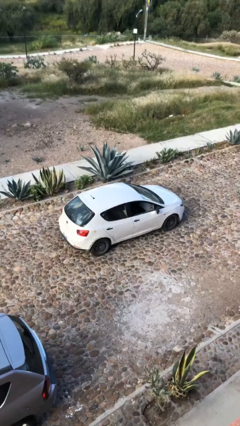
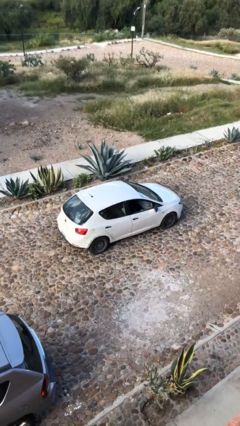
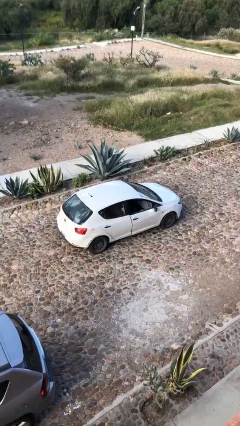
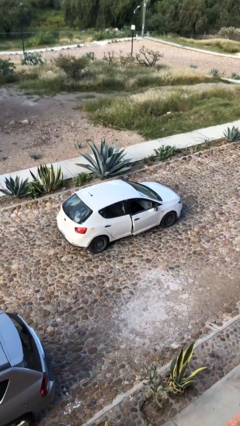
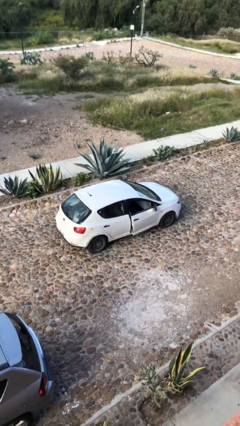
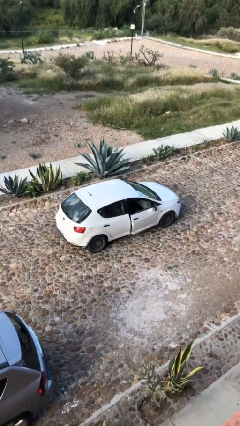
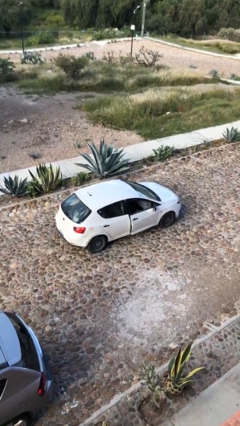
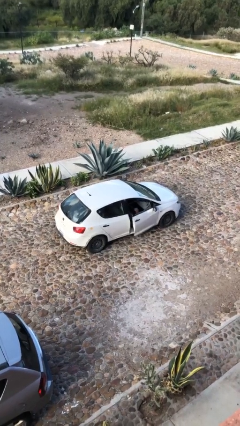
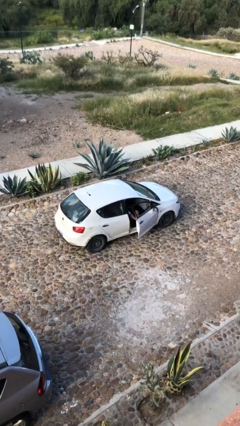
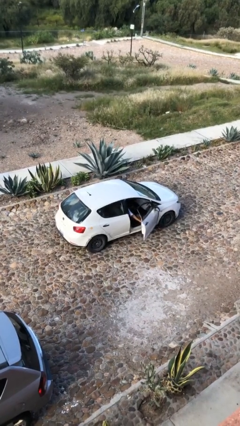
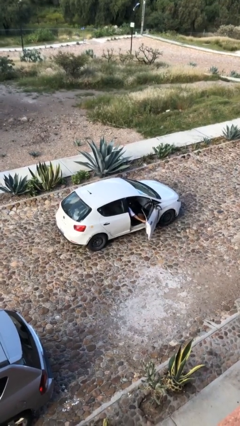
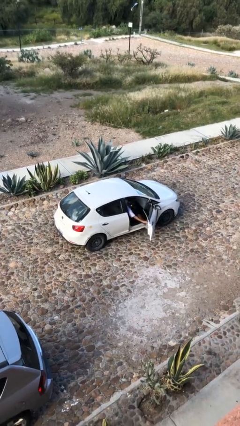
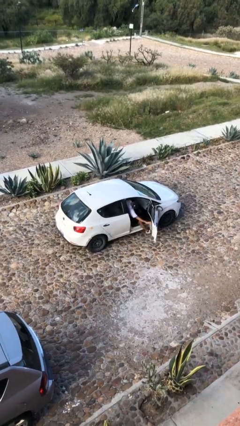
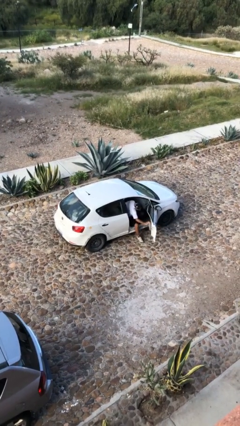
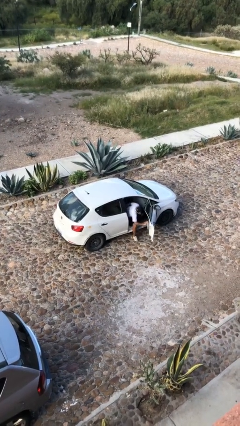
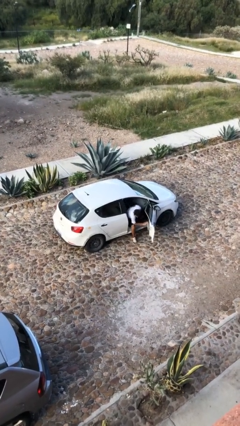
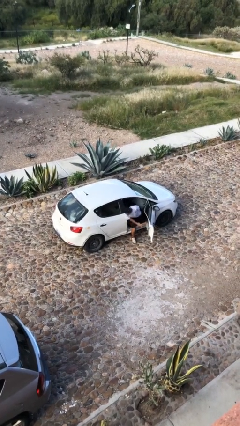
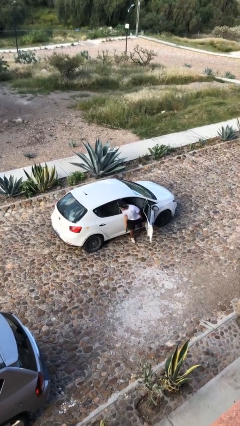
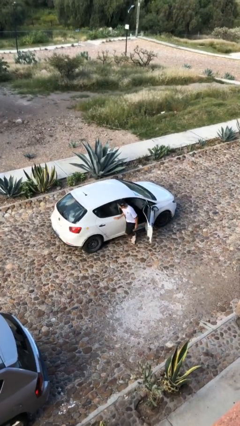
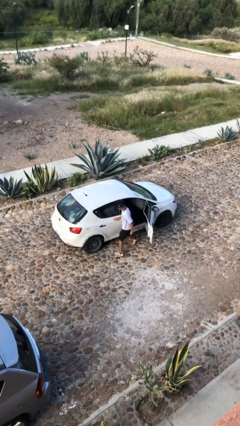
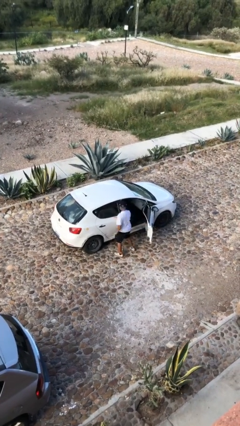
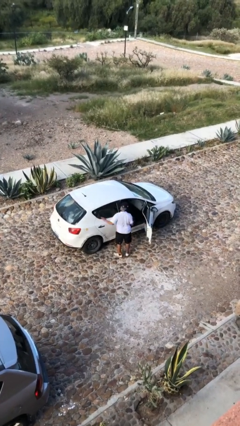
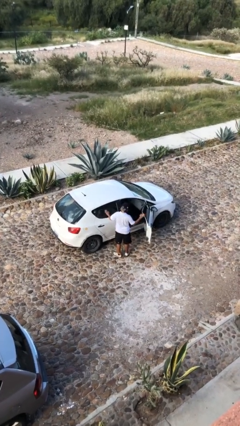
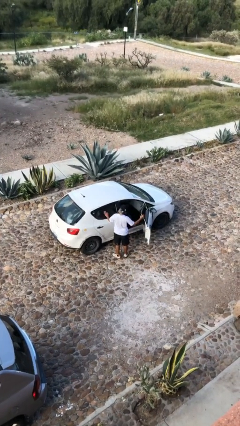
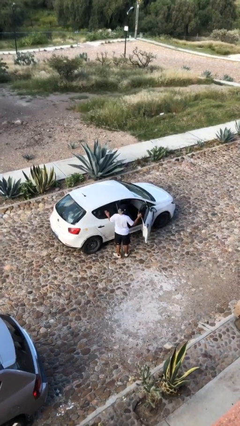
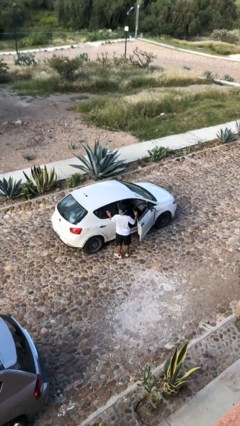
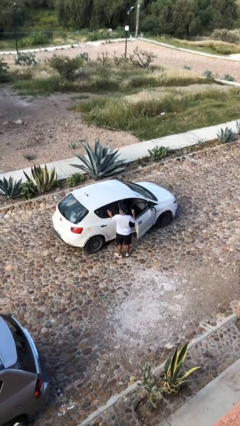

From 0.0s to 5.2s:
car drops off person

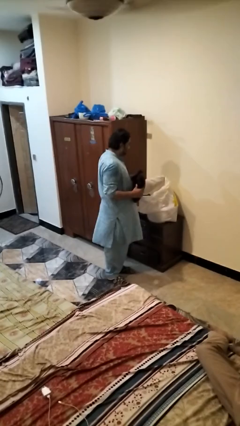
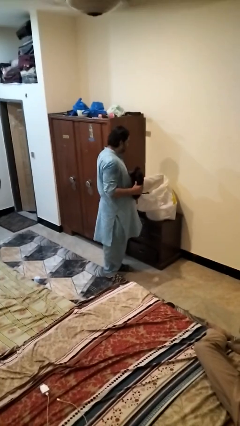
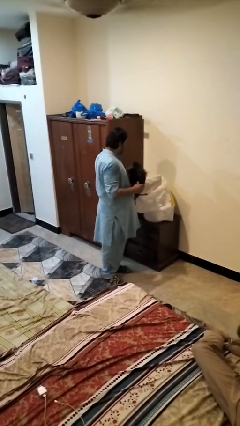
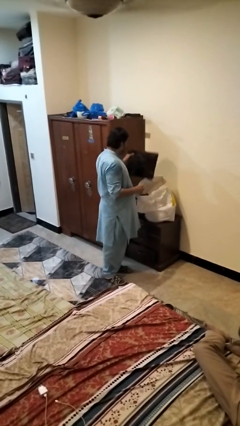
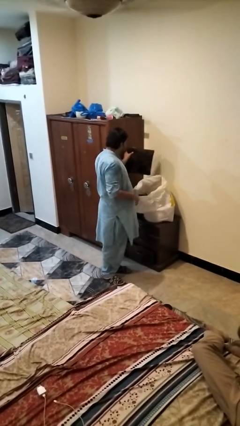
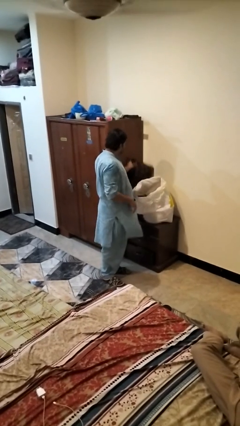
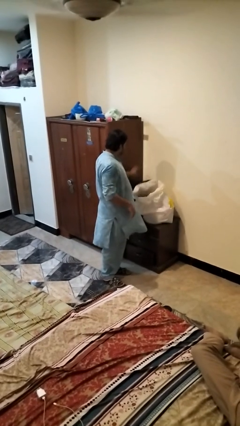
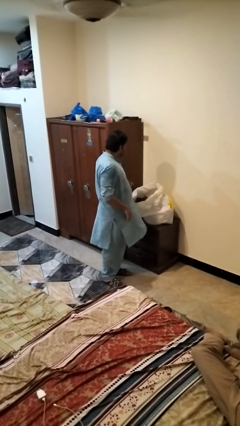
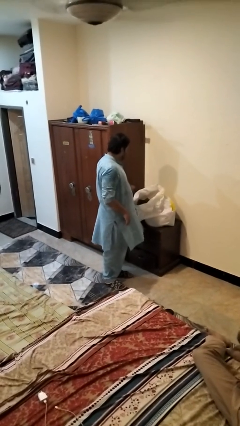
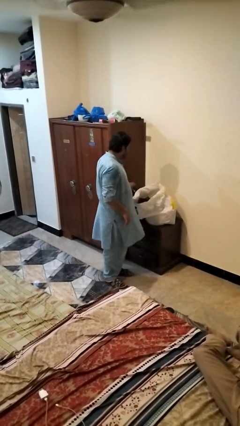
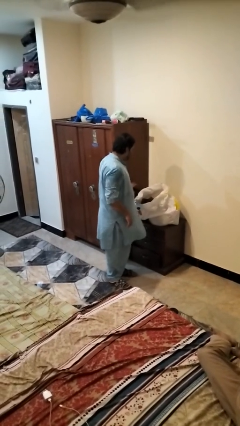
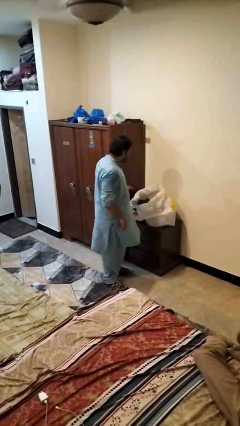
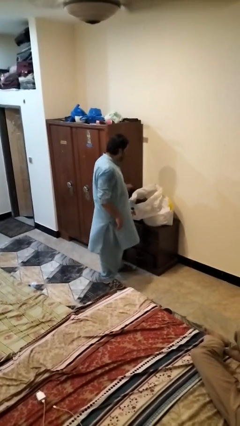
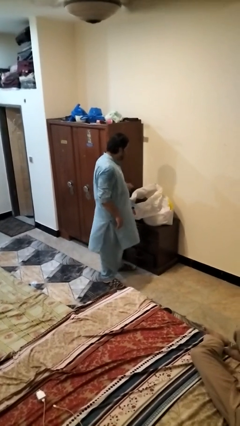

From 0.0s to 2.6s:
person puts object into bag

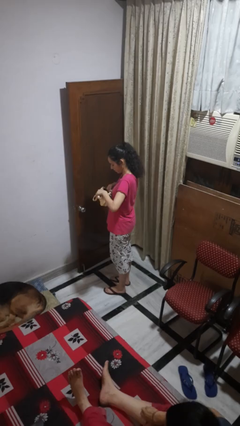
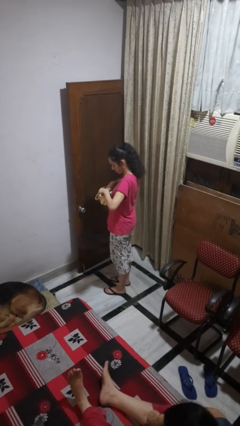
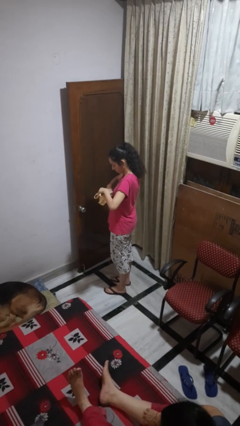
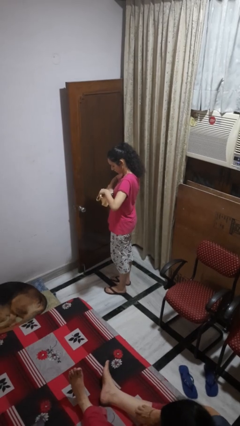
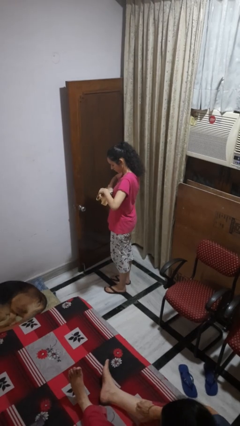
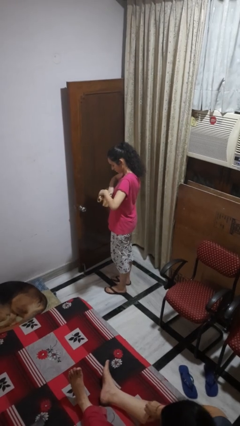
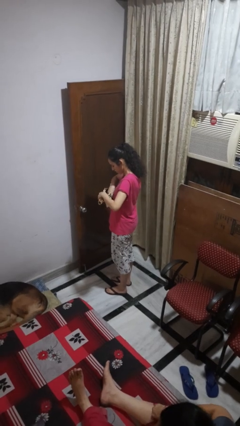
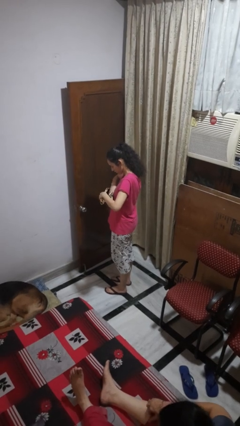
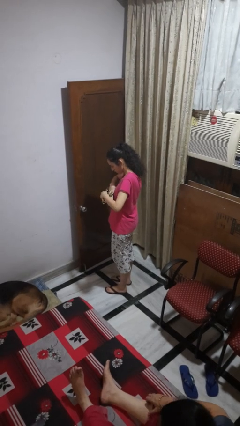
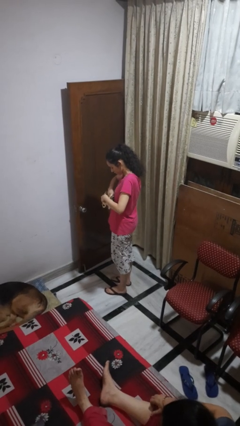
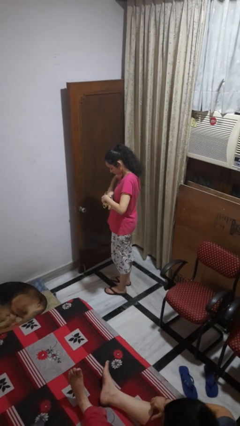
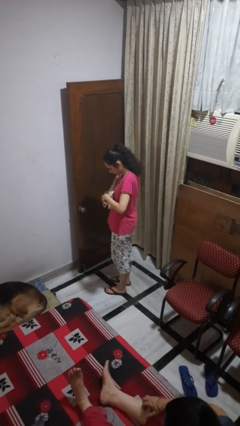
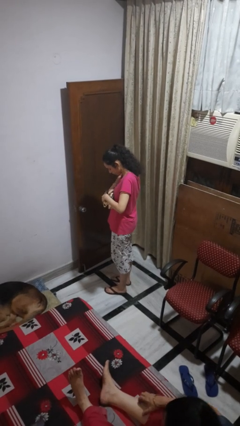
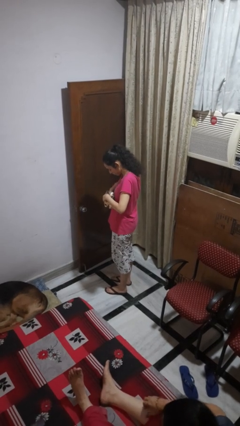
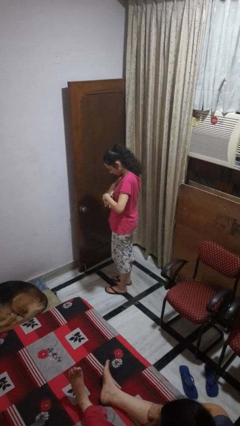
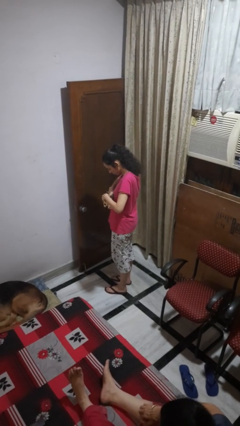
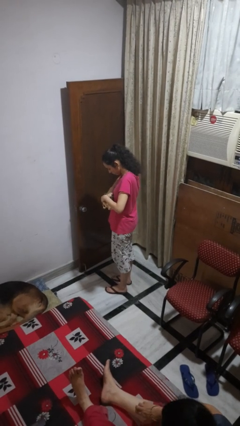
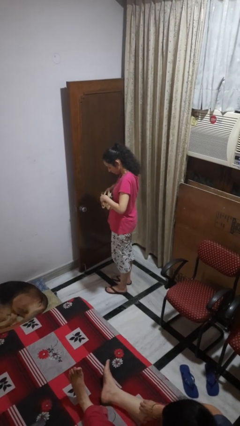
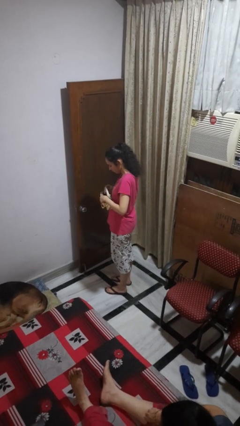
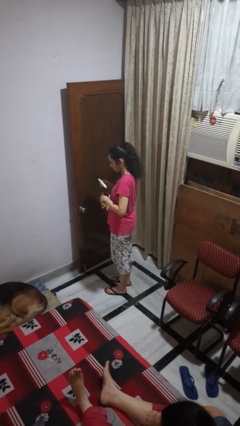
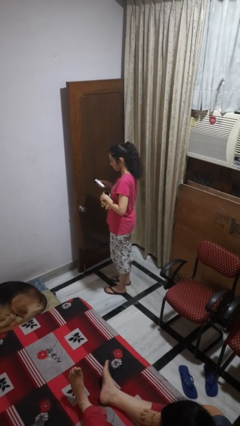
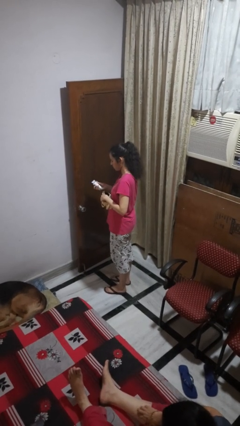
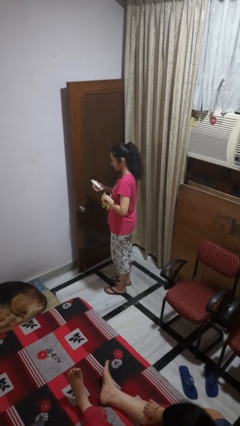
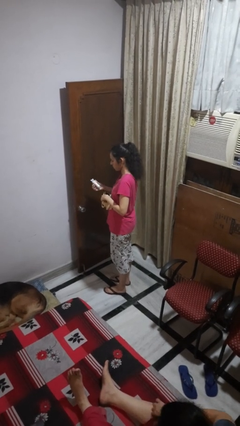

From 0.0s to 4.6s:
person searches in purse

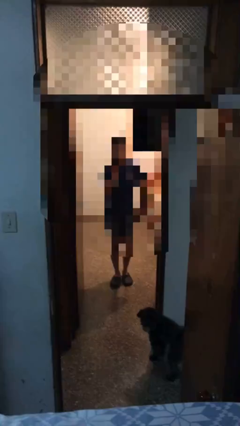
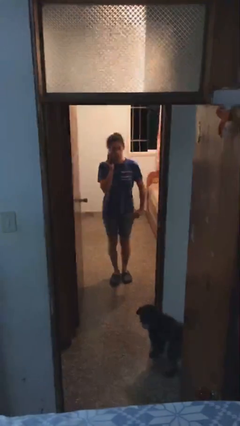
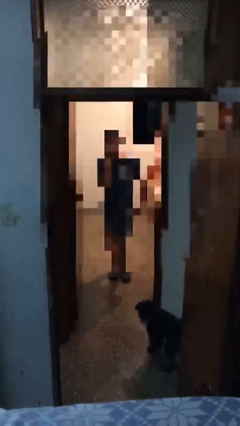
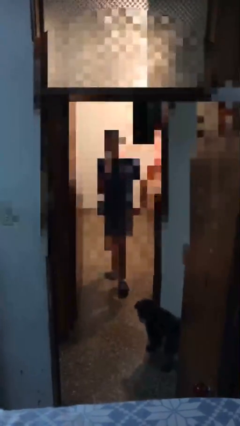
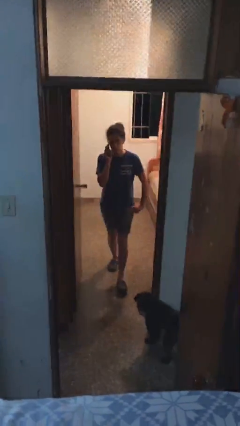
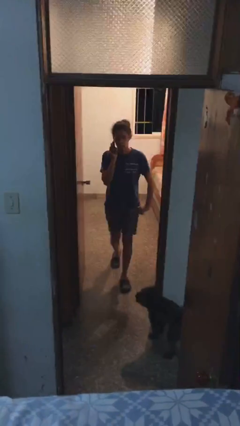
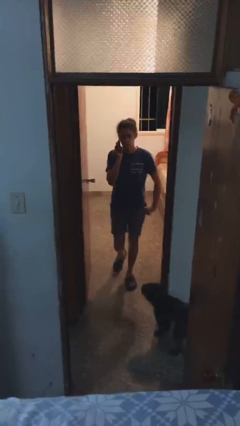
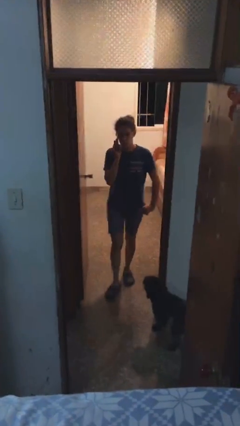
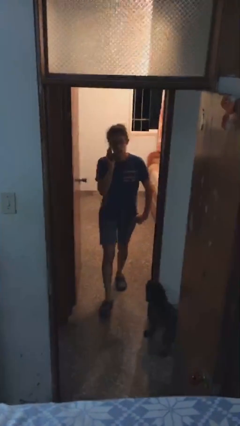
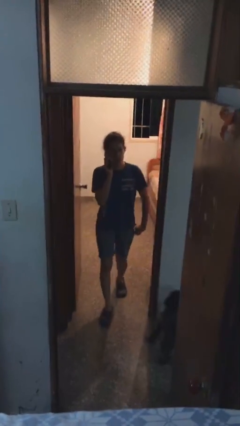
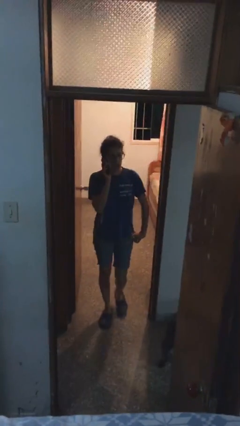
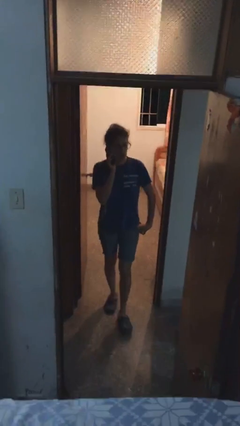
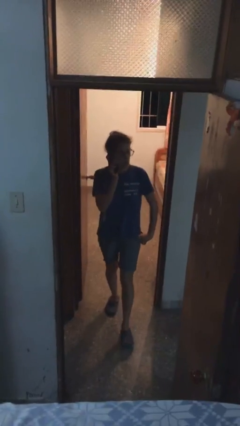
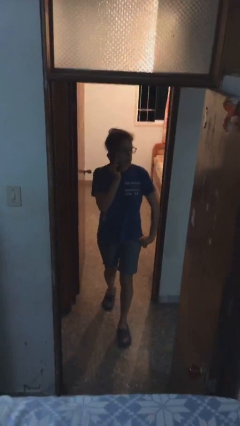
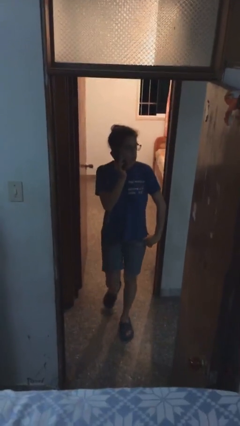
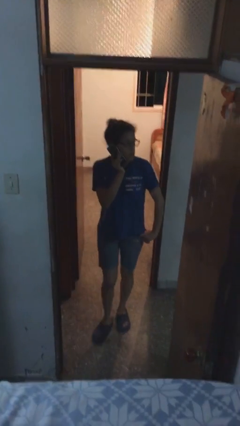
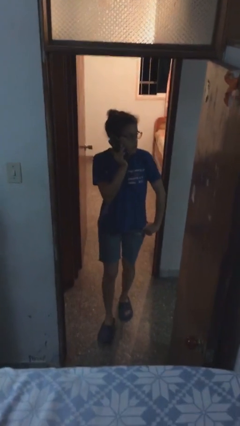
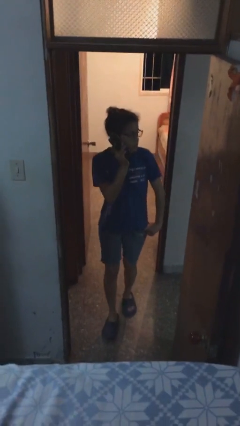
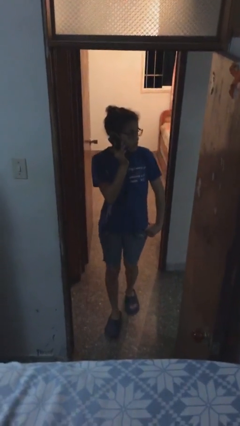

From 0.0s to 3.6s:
person enters scene through structure

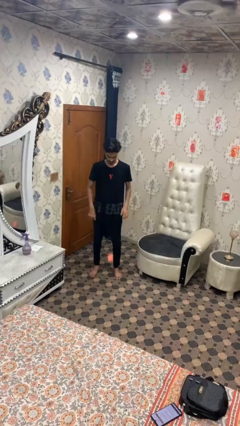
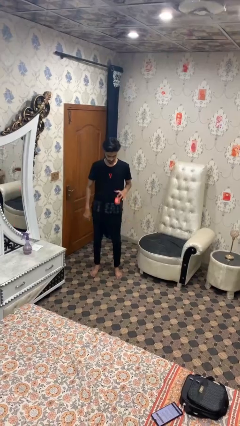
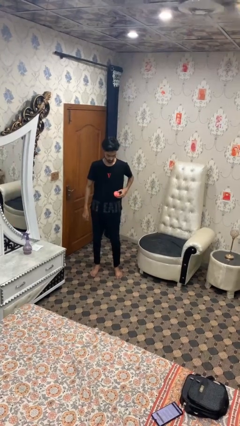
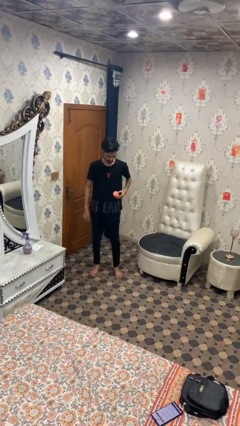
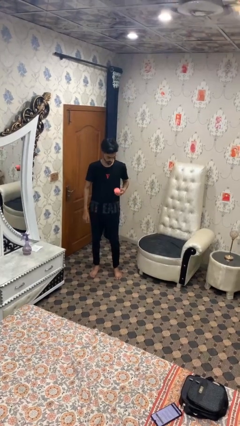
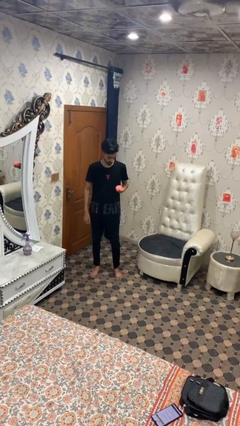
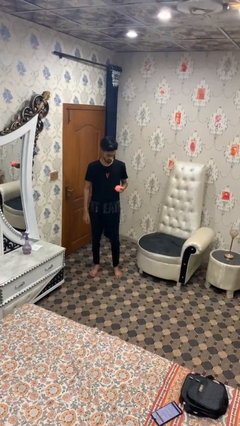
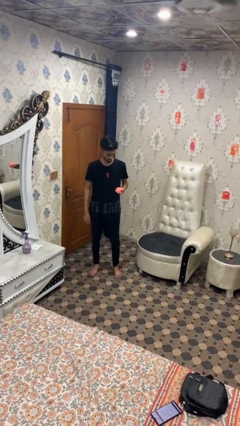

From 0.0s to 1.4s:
person bounces ball on floor

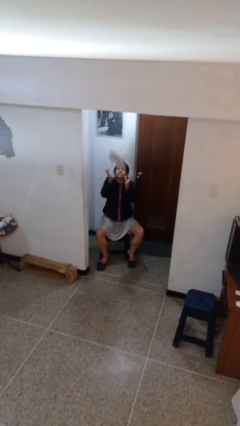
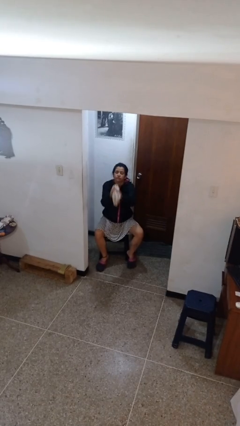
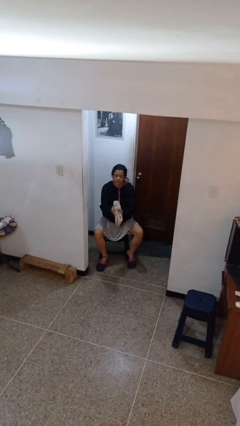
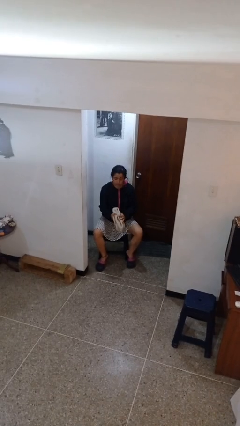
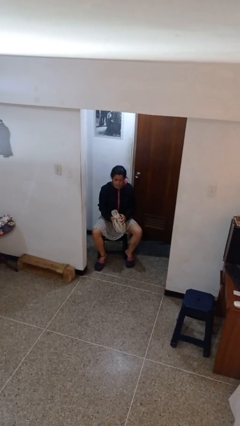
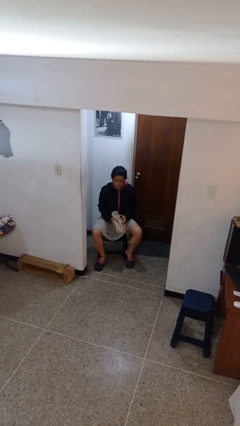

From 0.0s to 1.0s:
person catches dropped object
